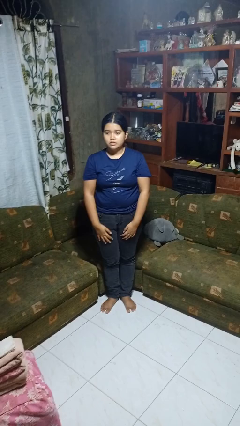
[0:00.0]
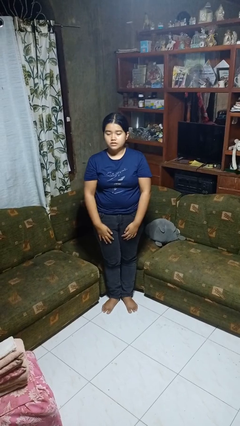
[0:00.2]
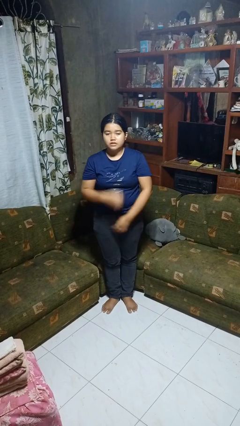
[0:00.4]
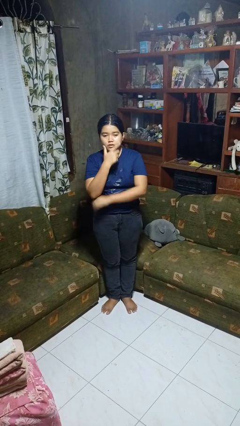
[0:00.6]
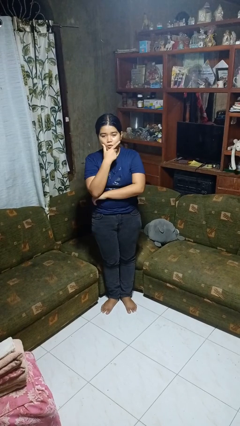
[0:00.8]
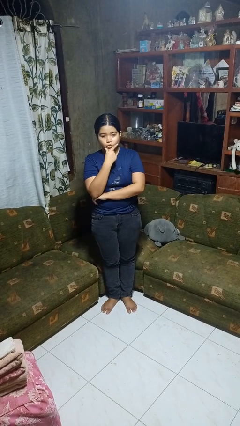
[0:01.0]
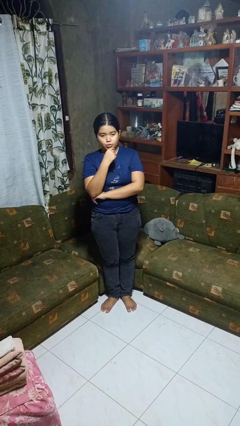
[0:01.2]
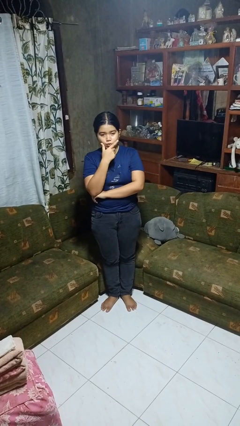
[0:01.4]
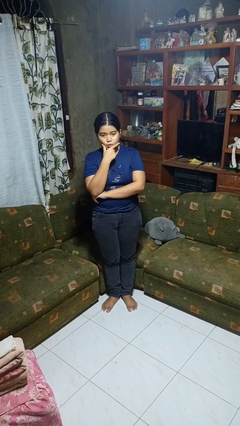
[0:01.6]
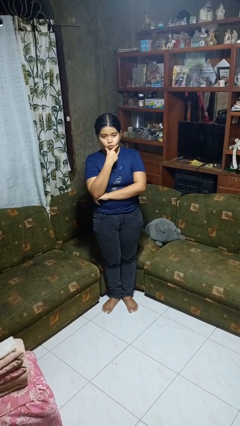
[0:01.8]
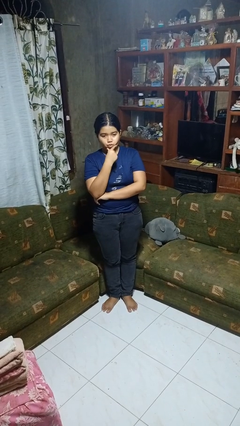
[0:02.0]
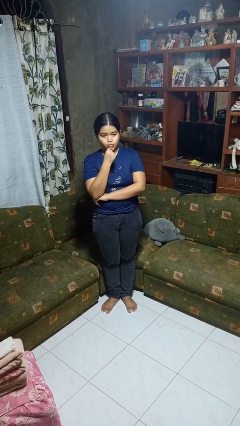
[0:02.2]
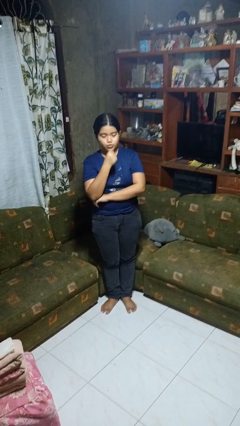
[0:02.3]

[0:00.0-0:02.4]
person strokes chin

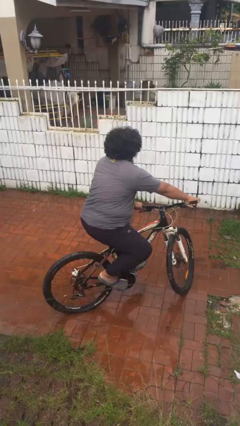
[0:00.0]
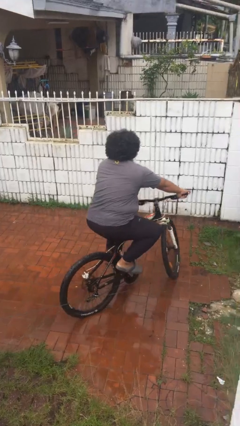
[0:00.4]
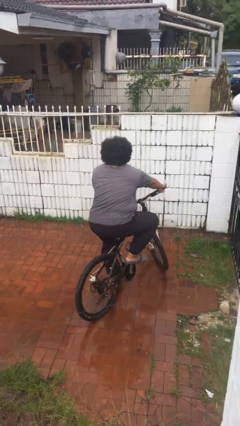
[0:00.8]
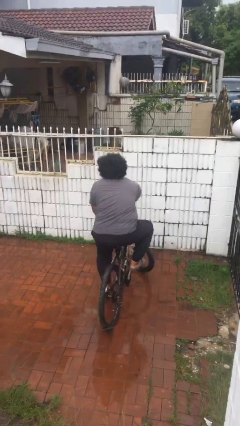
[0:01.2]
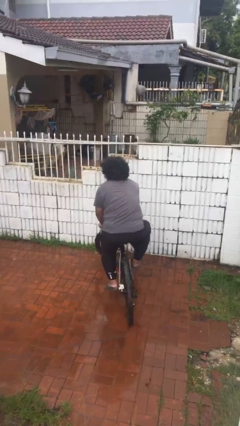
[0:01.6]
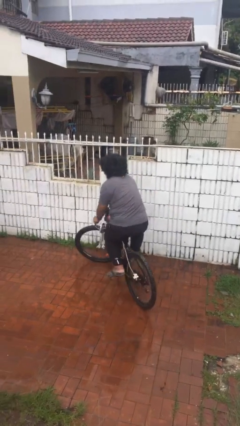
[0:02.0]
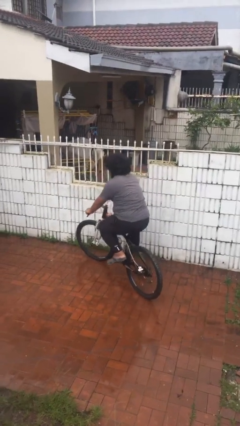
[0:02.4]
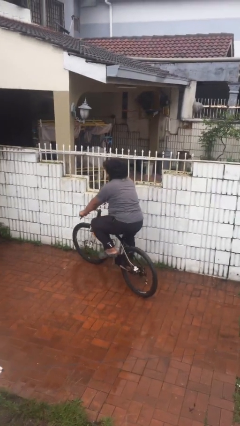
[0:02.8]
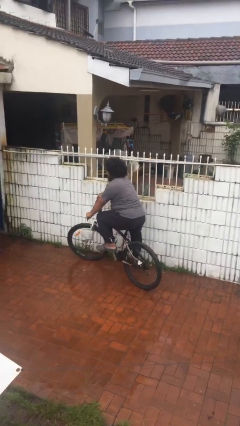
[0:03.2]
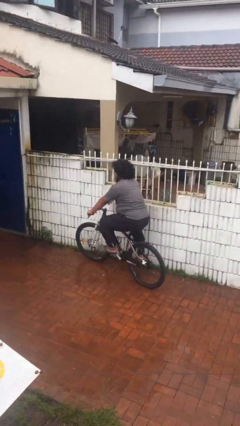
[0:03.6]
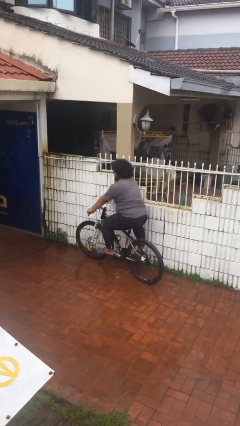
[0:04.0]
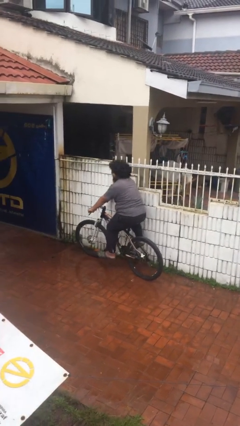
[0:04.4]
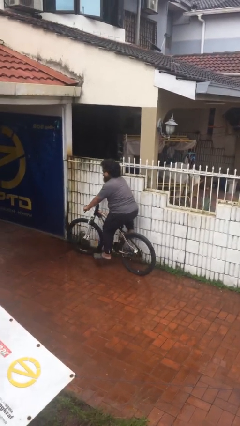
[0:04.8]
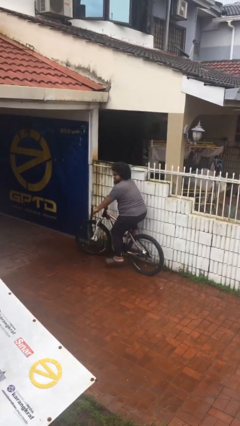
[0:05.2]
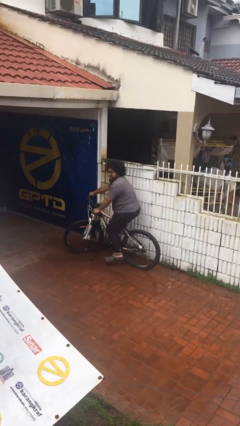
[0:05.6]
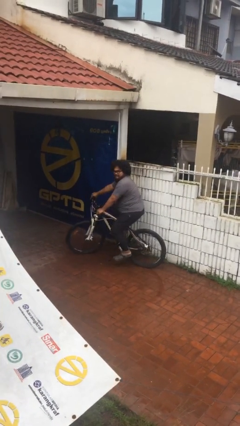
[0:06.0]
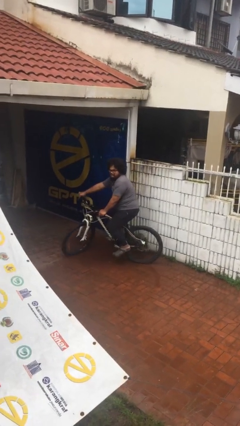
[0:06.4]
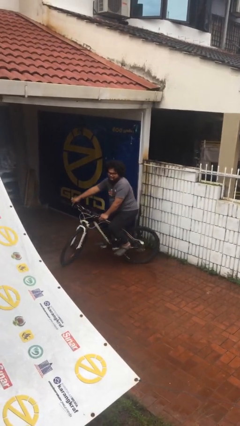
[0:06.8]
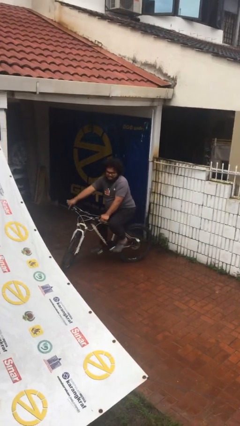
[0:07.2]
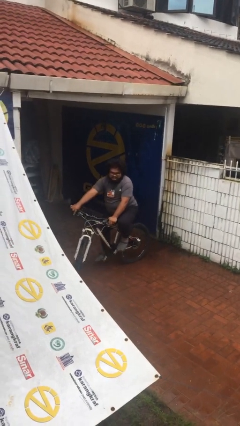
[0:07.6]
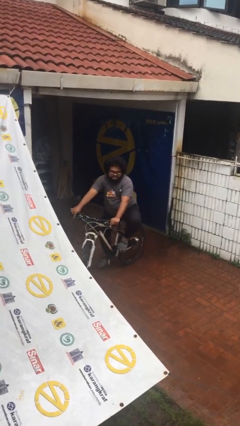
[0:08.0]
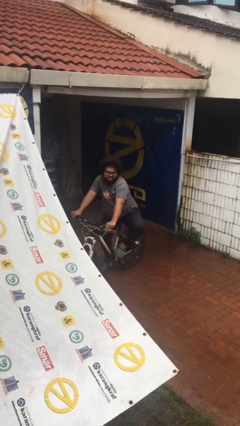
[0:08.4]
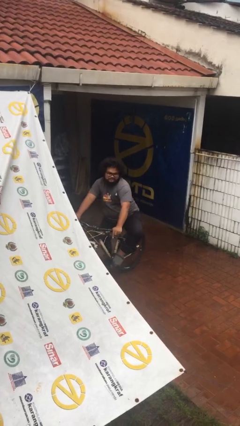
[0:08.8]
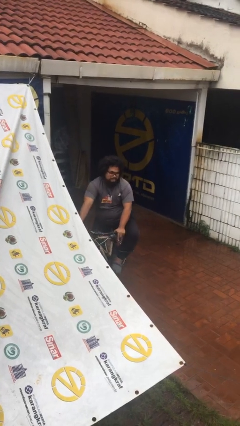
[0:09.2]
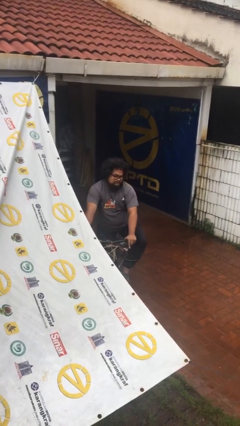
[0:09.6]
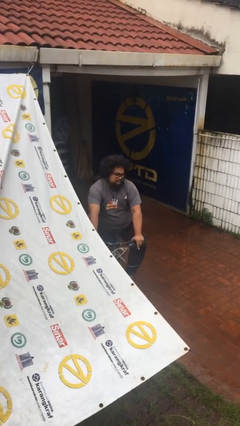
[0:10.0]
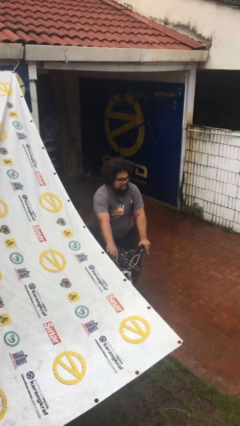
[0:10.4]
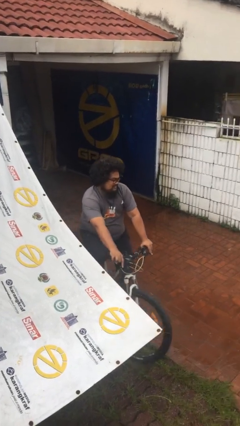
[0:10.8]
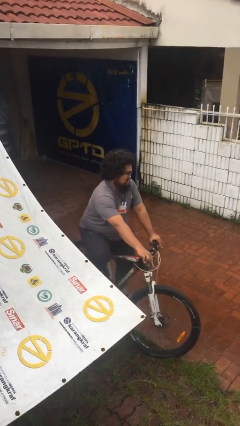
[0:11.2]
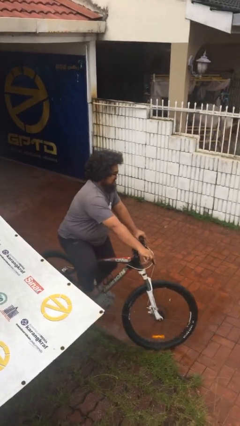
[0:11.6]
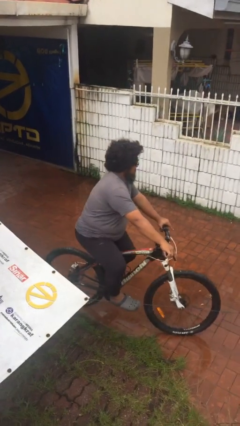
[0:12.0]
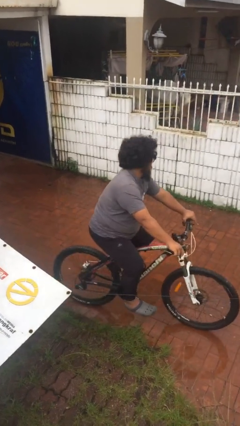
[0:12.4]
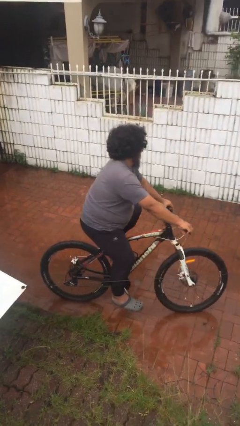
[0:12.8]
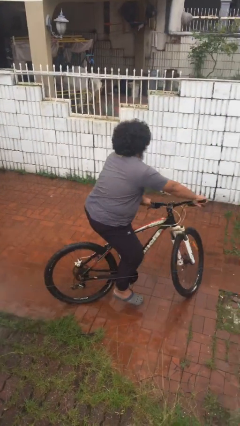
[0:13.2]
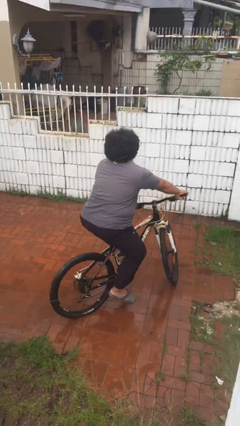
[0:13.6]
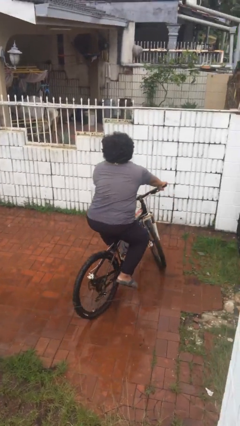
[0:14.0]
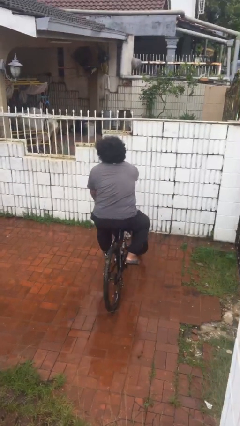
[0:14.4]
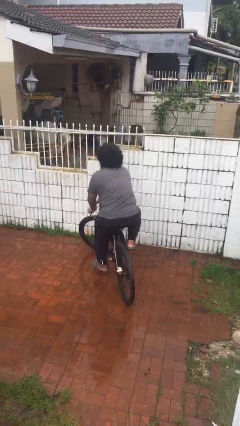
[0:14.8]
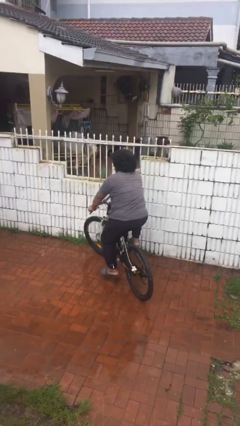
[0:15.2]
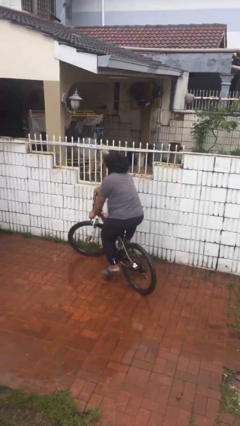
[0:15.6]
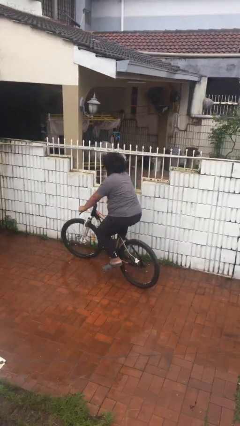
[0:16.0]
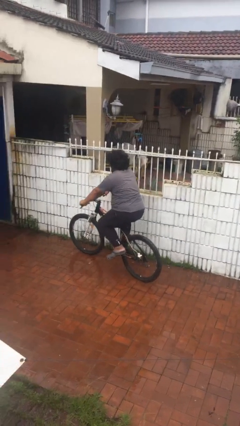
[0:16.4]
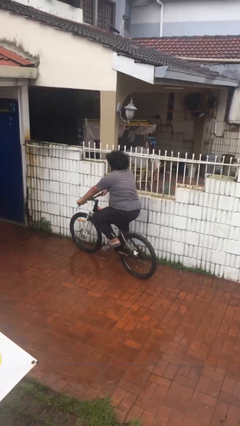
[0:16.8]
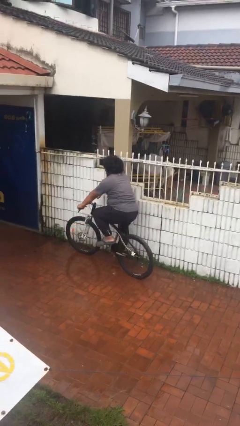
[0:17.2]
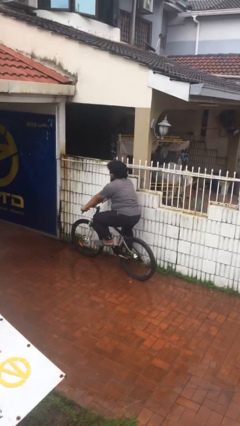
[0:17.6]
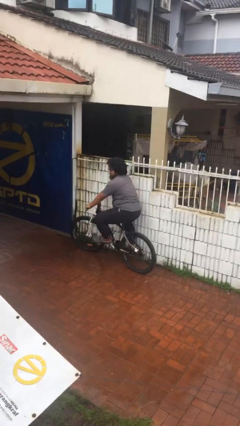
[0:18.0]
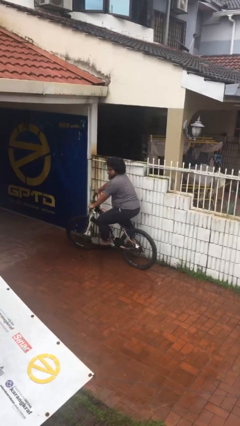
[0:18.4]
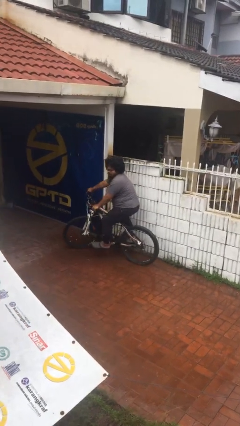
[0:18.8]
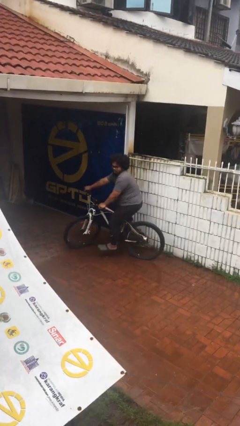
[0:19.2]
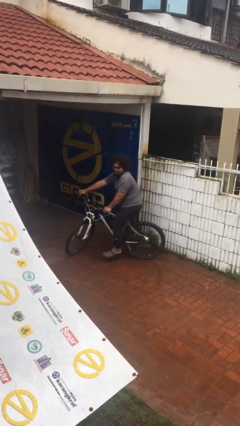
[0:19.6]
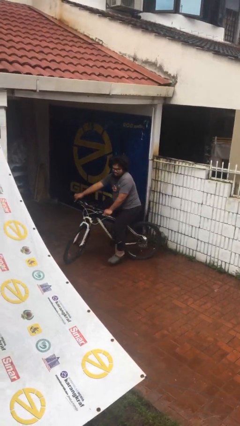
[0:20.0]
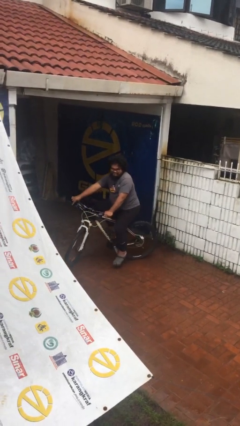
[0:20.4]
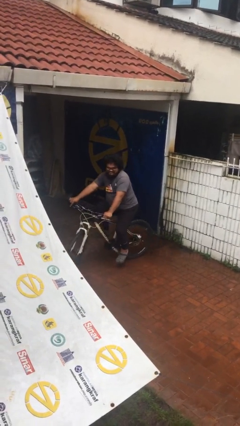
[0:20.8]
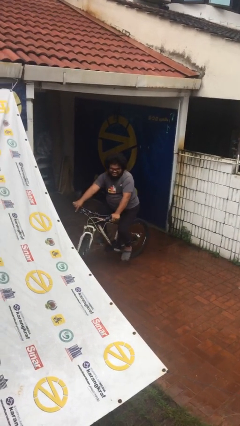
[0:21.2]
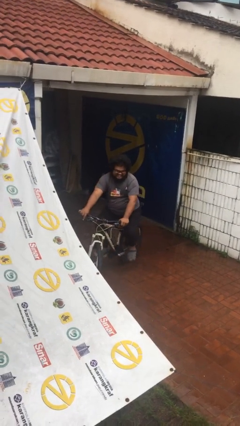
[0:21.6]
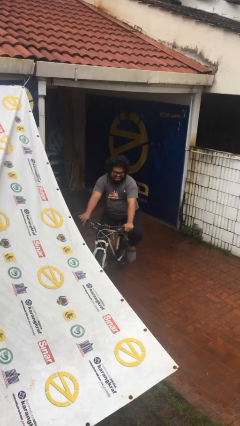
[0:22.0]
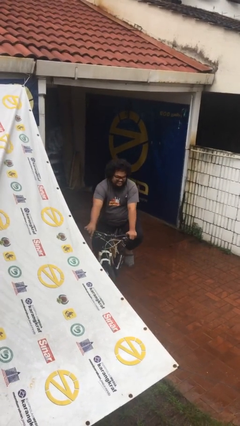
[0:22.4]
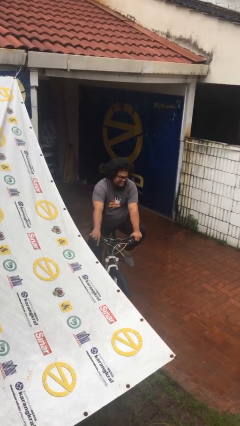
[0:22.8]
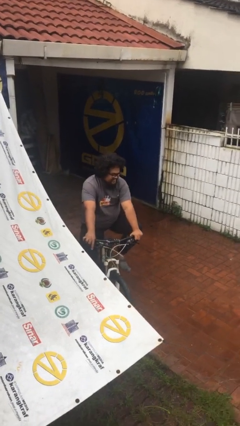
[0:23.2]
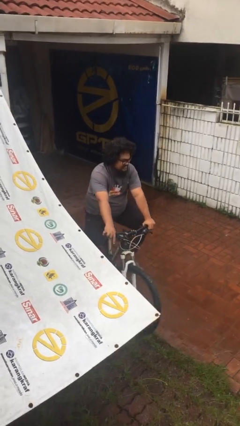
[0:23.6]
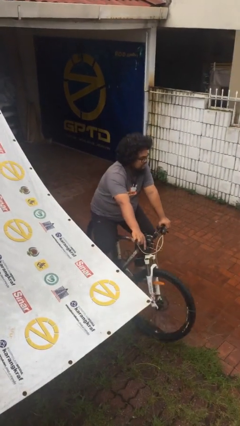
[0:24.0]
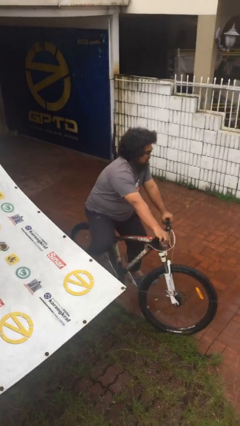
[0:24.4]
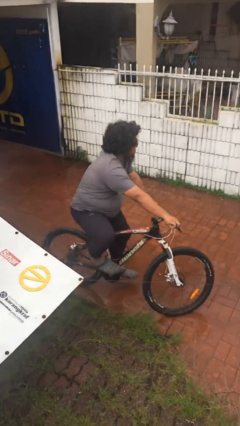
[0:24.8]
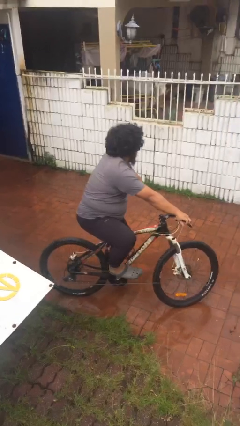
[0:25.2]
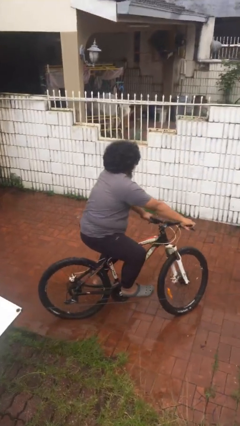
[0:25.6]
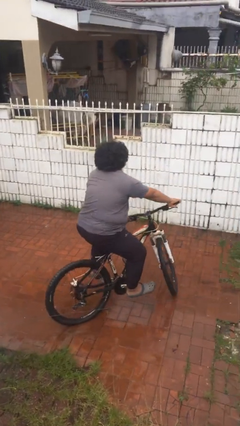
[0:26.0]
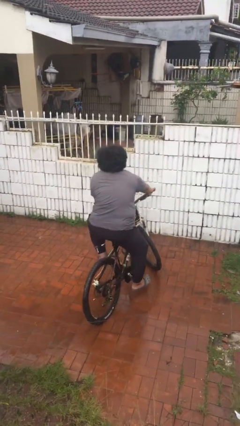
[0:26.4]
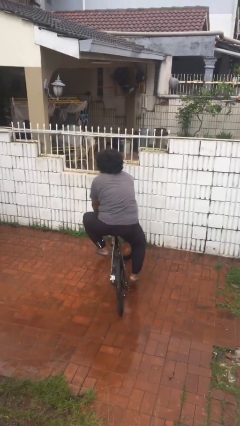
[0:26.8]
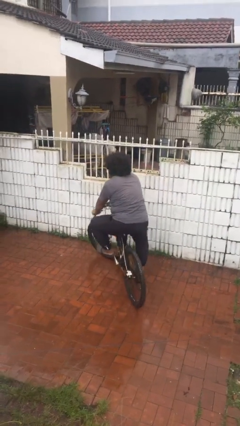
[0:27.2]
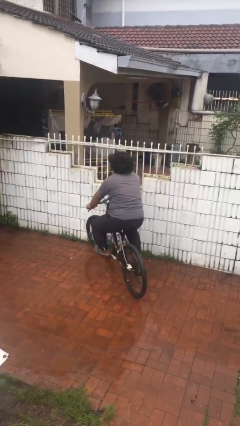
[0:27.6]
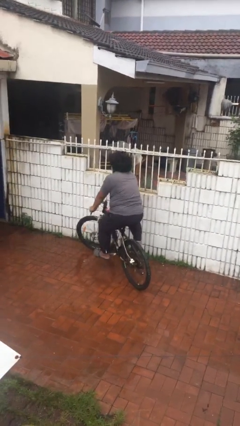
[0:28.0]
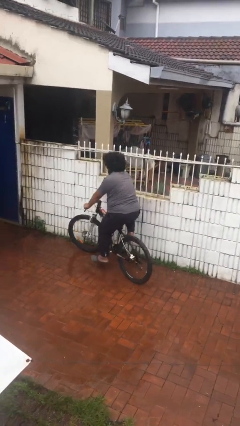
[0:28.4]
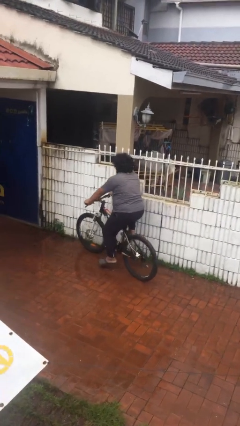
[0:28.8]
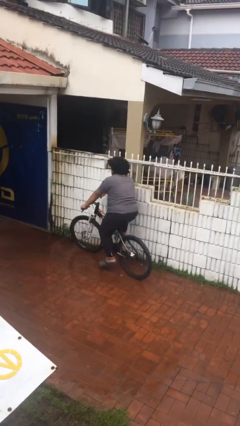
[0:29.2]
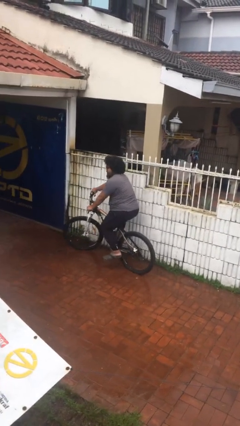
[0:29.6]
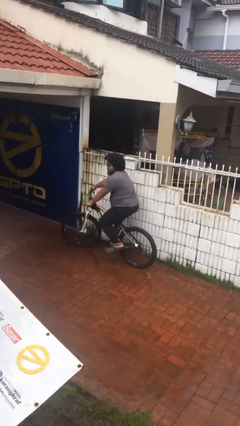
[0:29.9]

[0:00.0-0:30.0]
person rides bicycle

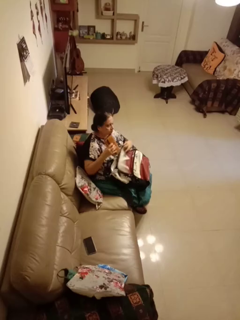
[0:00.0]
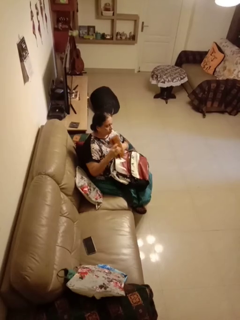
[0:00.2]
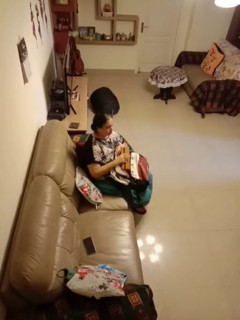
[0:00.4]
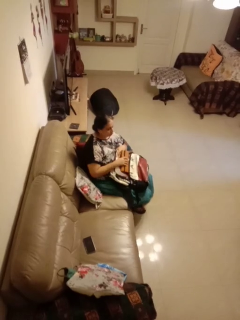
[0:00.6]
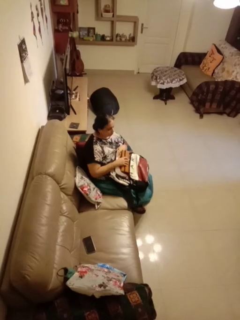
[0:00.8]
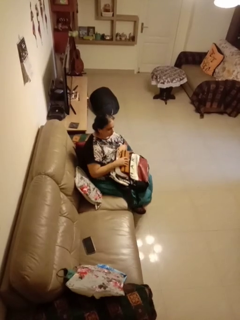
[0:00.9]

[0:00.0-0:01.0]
person takes object from backpack
